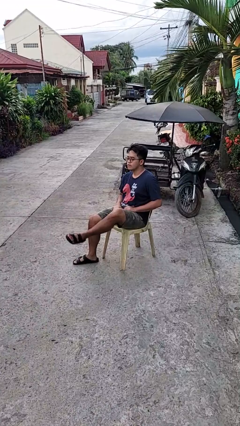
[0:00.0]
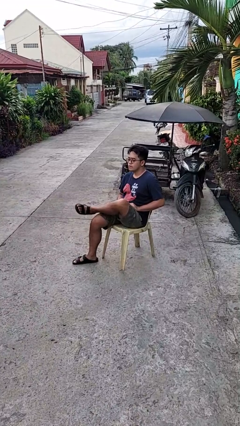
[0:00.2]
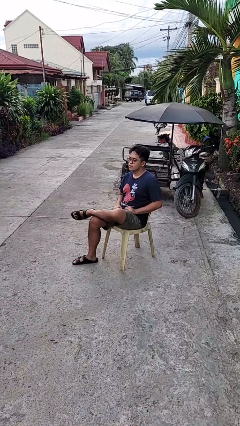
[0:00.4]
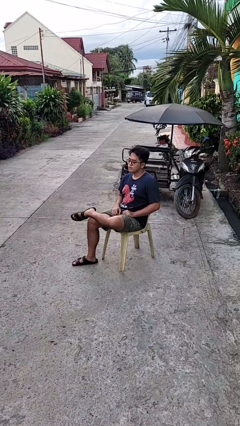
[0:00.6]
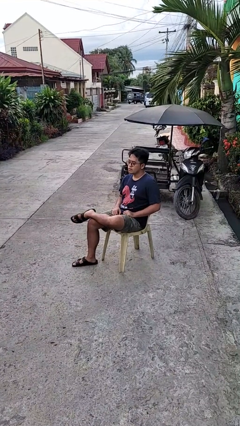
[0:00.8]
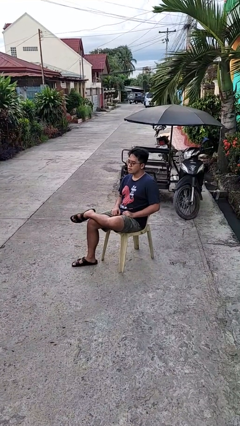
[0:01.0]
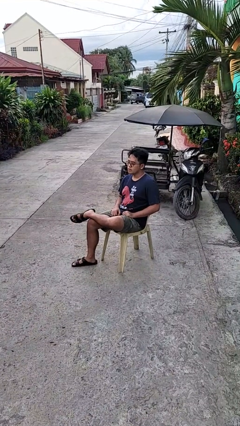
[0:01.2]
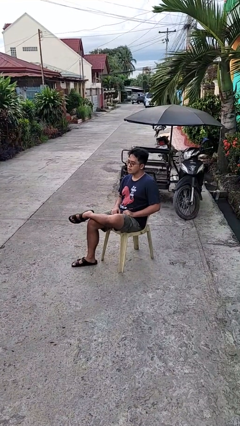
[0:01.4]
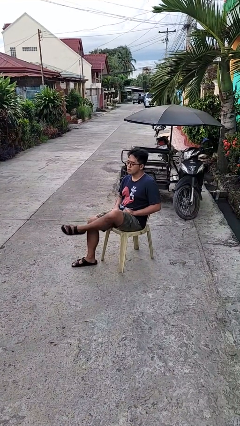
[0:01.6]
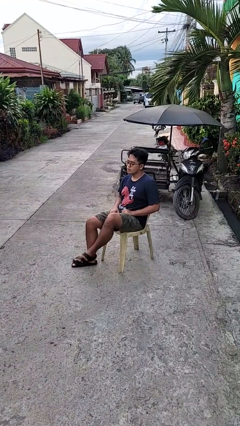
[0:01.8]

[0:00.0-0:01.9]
person crosses legs

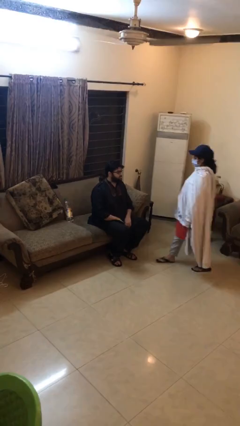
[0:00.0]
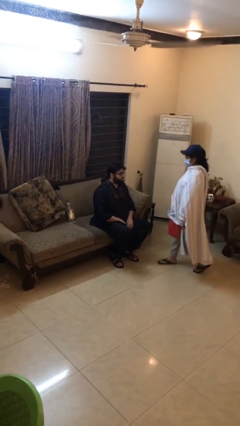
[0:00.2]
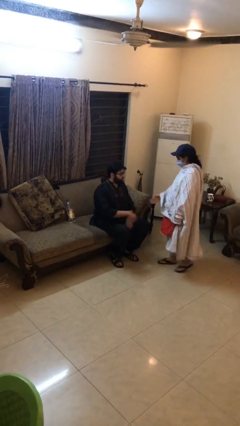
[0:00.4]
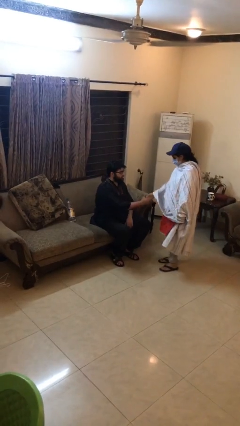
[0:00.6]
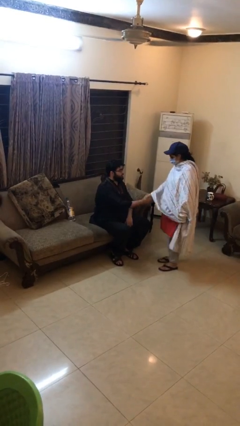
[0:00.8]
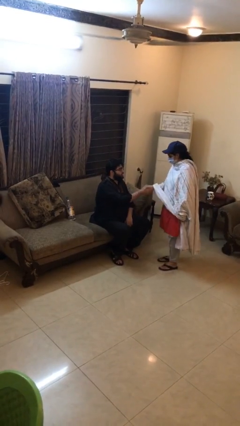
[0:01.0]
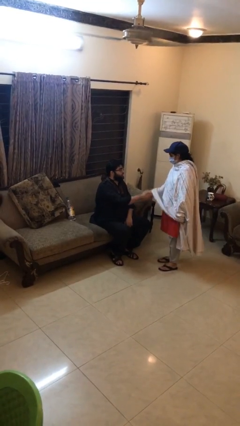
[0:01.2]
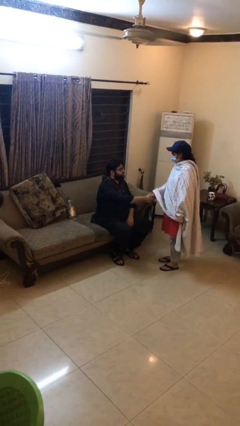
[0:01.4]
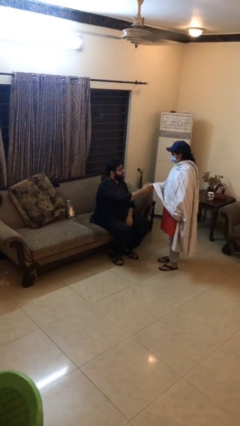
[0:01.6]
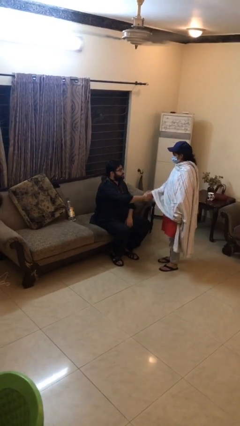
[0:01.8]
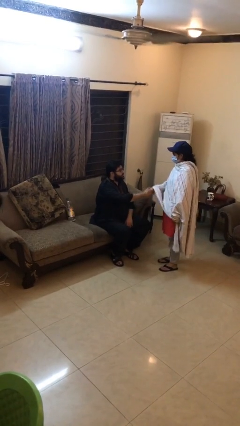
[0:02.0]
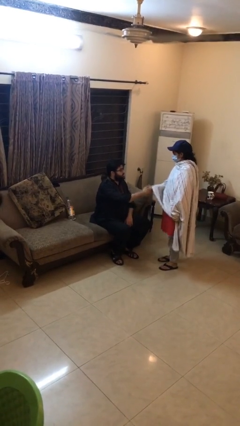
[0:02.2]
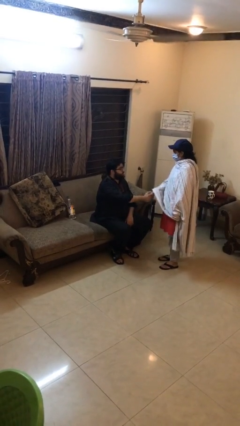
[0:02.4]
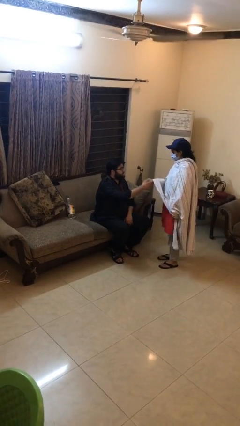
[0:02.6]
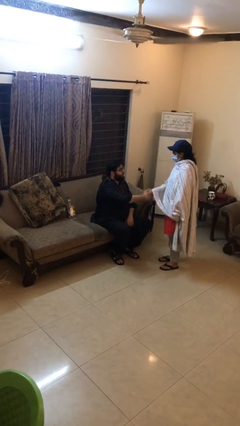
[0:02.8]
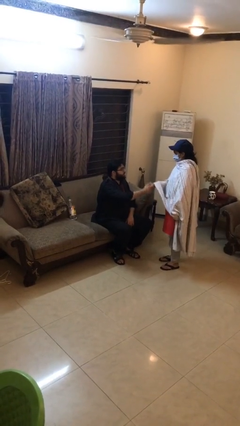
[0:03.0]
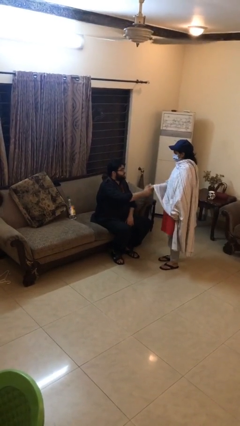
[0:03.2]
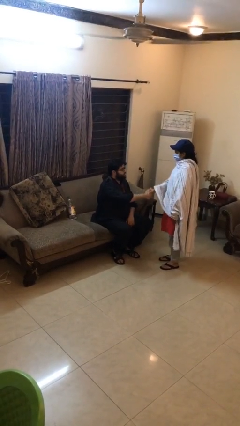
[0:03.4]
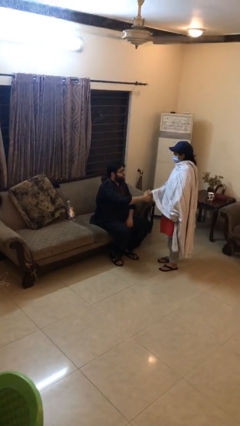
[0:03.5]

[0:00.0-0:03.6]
person shakes hand

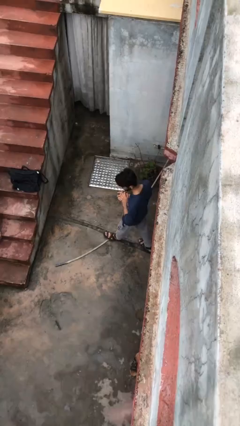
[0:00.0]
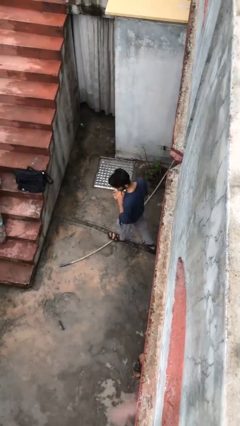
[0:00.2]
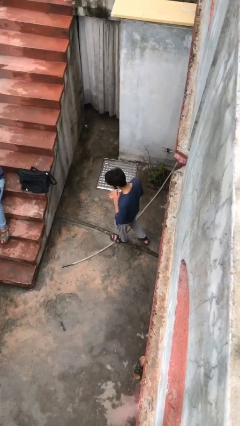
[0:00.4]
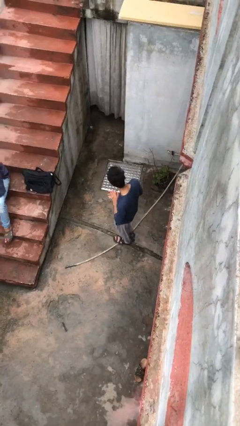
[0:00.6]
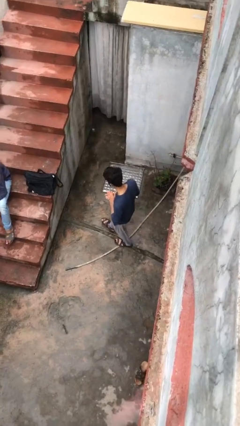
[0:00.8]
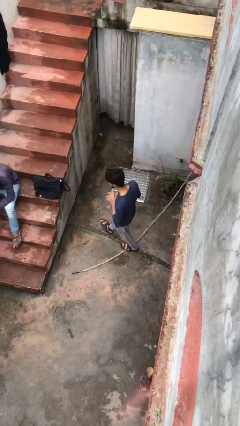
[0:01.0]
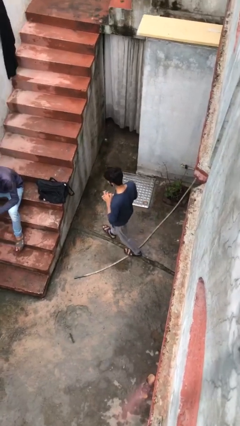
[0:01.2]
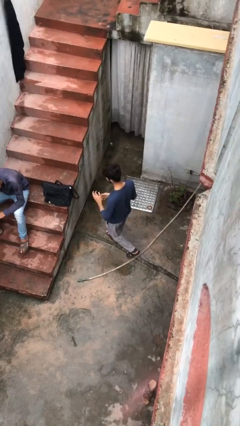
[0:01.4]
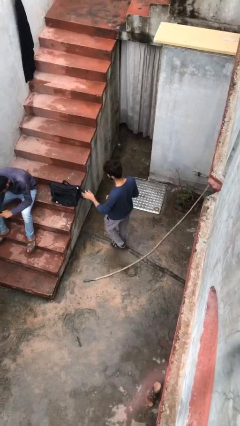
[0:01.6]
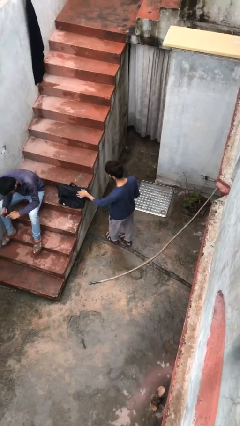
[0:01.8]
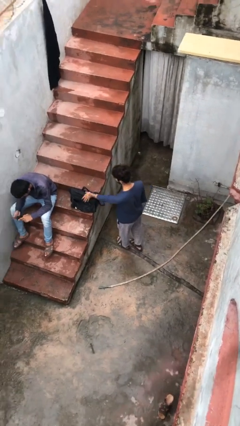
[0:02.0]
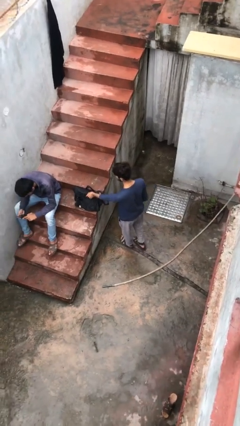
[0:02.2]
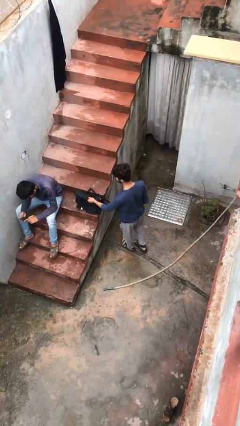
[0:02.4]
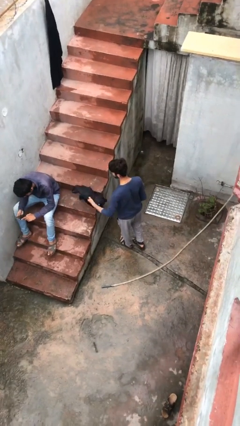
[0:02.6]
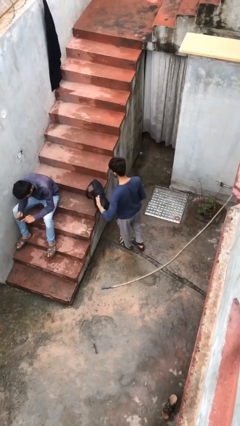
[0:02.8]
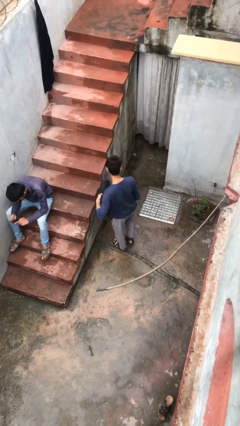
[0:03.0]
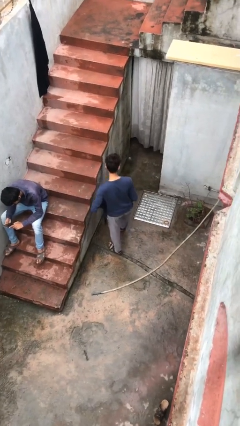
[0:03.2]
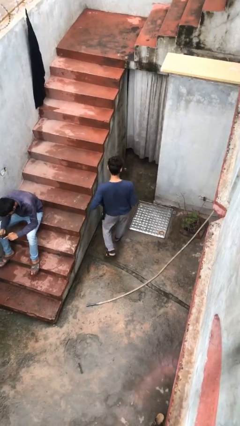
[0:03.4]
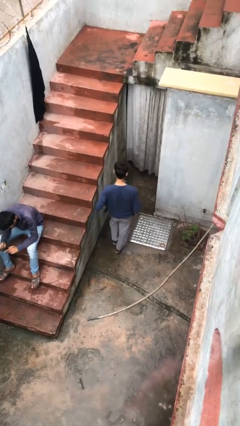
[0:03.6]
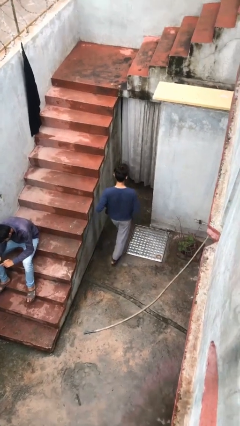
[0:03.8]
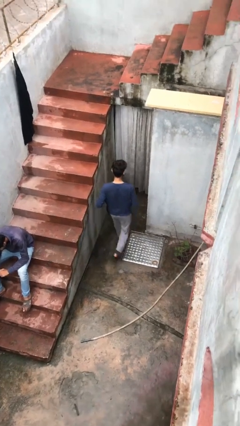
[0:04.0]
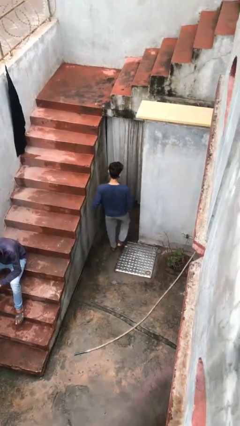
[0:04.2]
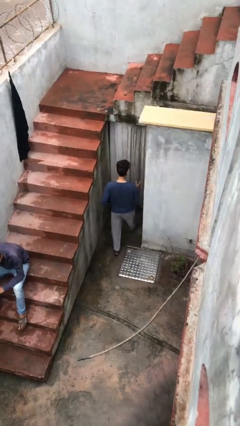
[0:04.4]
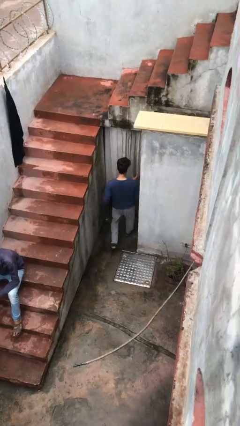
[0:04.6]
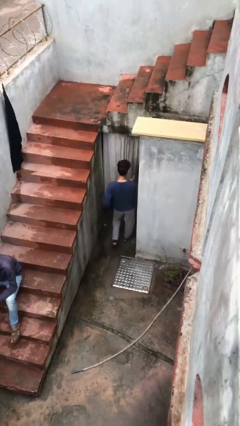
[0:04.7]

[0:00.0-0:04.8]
person steals object from person

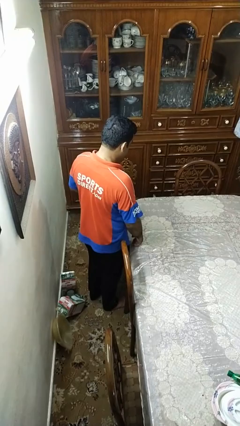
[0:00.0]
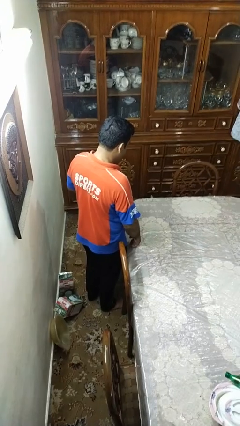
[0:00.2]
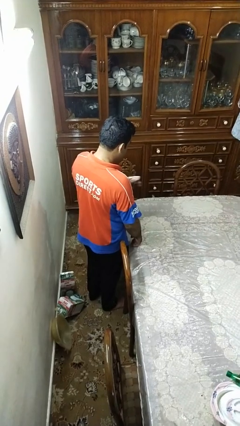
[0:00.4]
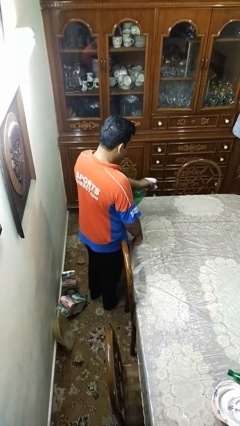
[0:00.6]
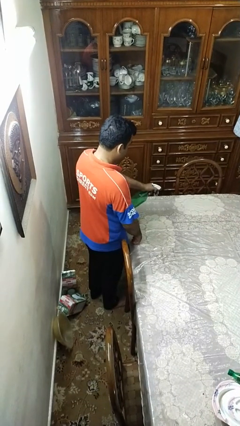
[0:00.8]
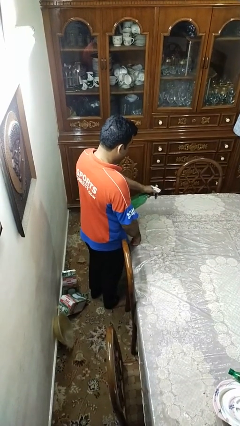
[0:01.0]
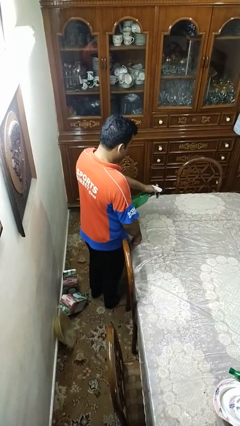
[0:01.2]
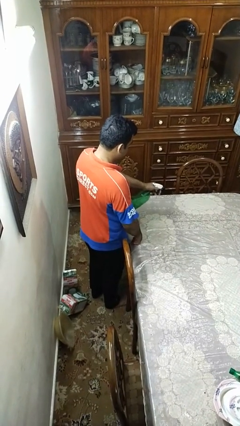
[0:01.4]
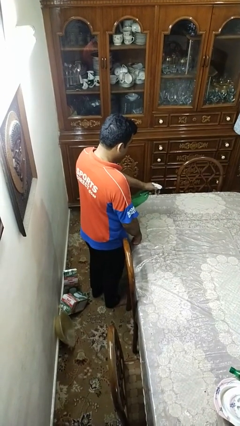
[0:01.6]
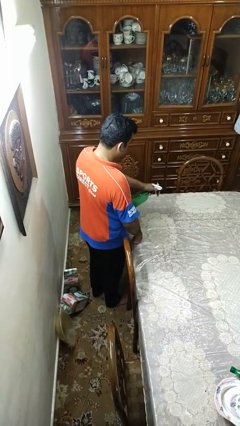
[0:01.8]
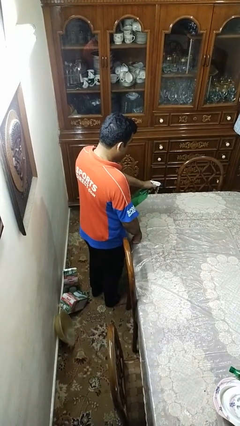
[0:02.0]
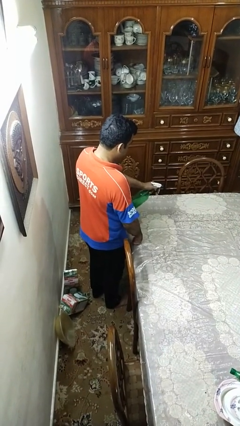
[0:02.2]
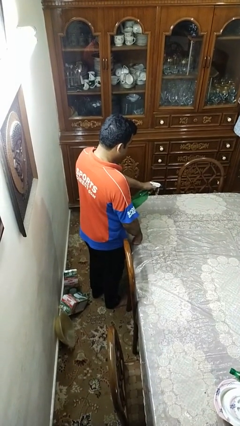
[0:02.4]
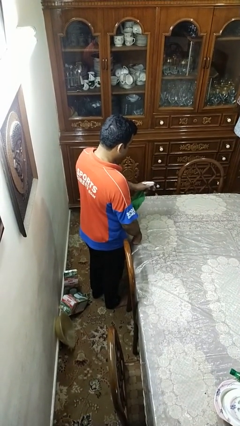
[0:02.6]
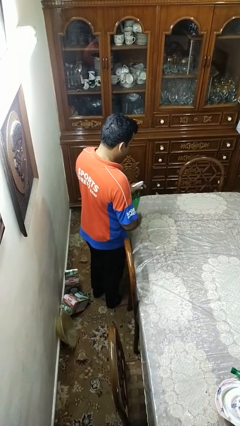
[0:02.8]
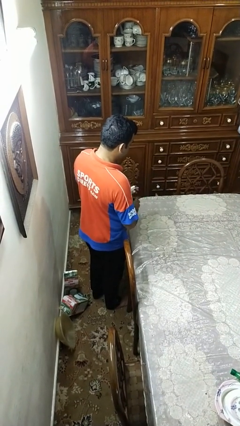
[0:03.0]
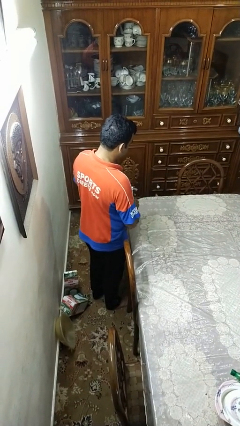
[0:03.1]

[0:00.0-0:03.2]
person sprays from bottle

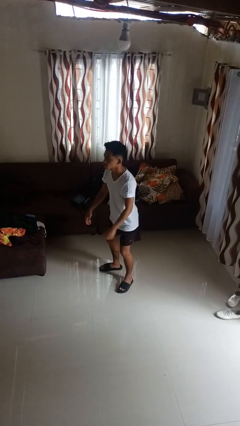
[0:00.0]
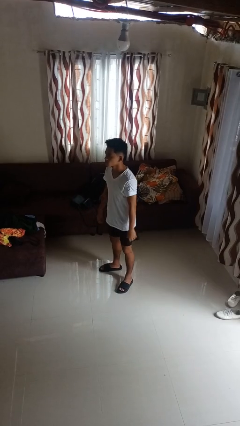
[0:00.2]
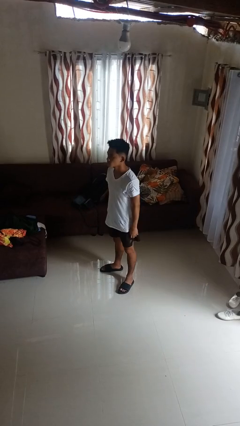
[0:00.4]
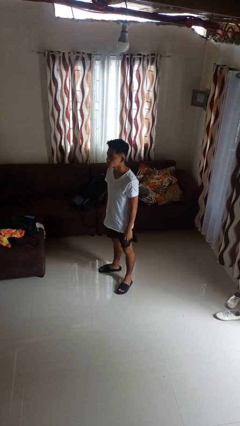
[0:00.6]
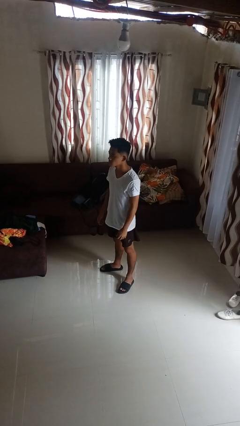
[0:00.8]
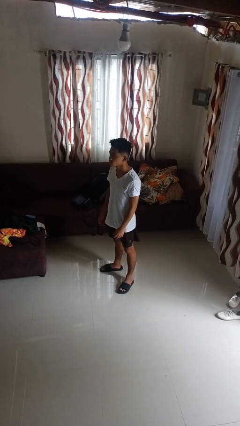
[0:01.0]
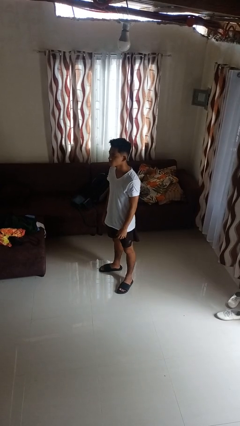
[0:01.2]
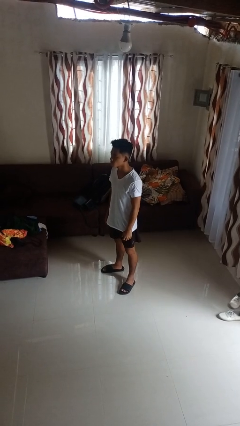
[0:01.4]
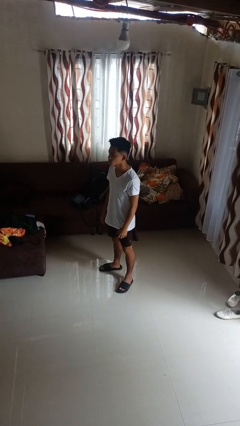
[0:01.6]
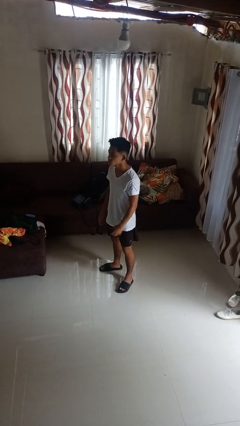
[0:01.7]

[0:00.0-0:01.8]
person stands up

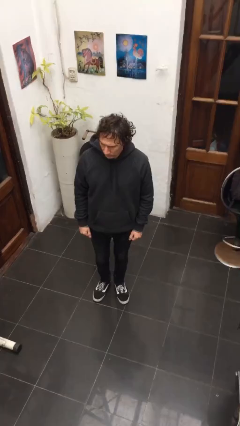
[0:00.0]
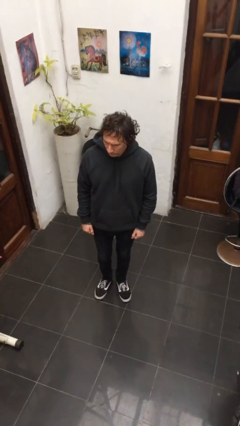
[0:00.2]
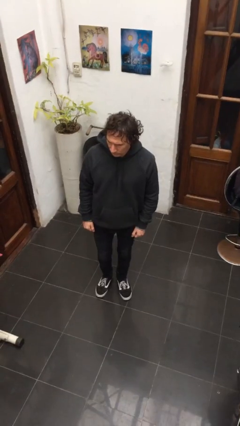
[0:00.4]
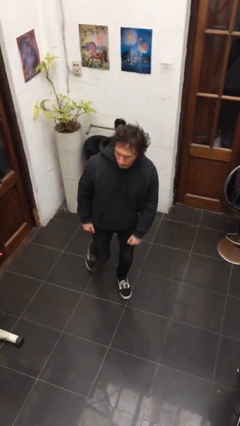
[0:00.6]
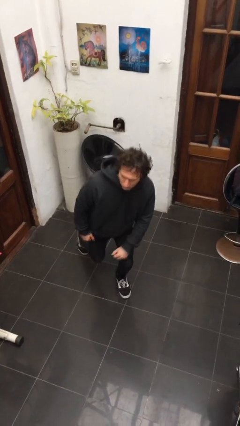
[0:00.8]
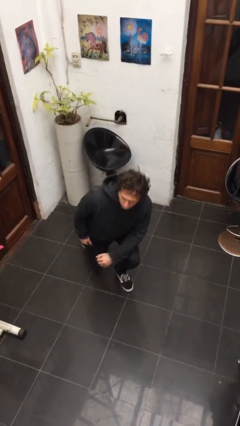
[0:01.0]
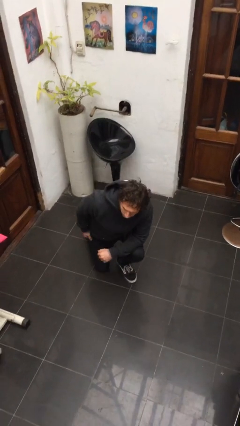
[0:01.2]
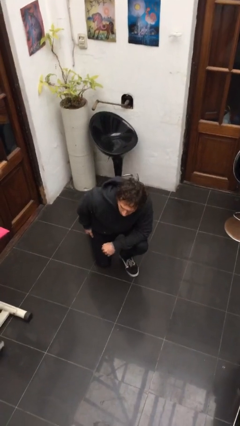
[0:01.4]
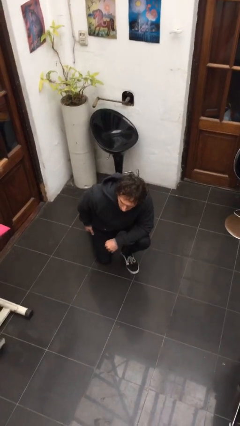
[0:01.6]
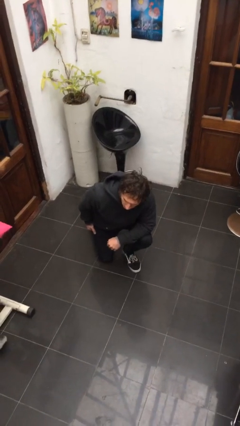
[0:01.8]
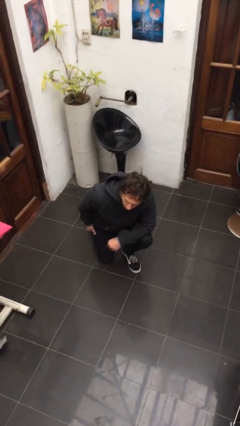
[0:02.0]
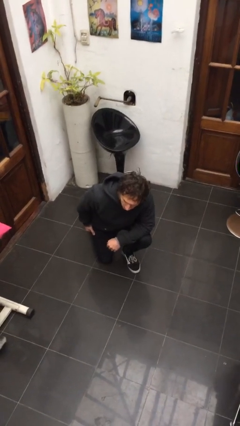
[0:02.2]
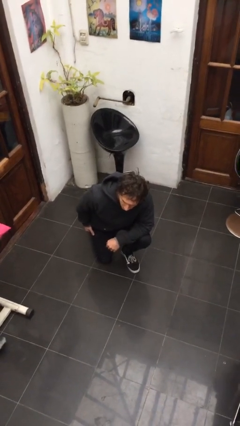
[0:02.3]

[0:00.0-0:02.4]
person kneels
